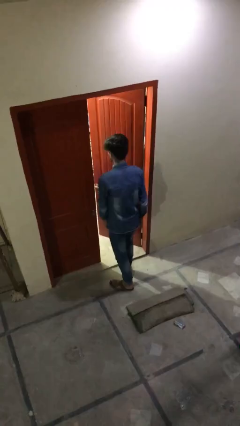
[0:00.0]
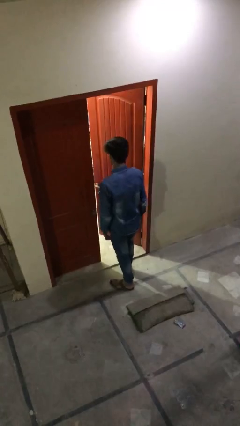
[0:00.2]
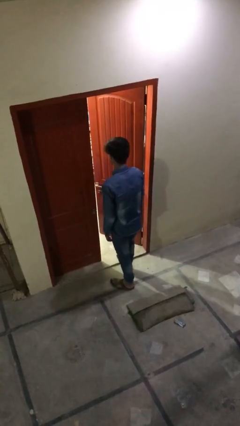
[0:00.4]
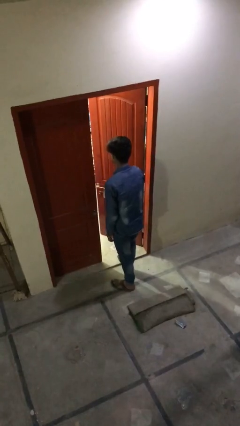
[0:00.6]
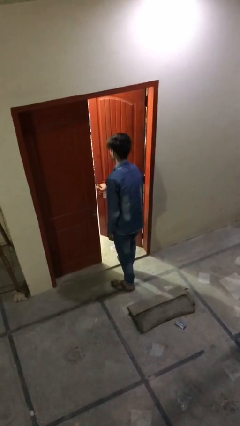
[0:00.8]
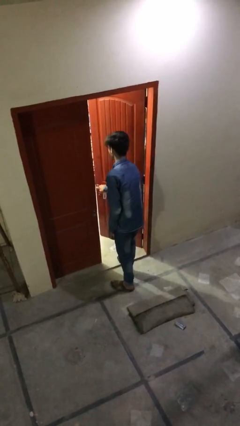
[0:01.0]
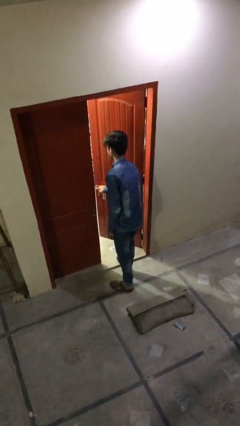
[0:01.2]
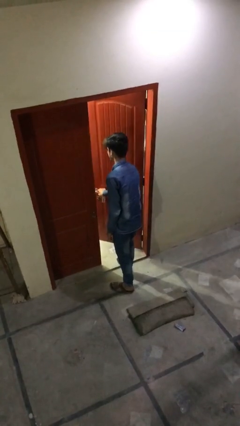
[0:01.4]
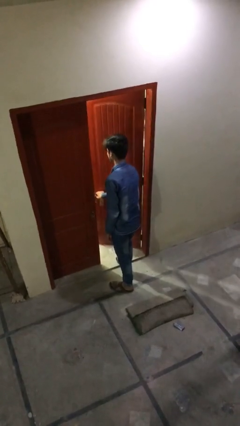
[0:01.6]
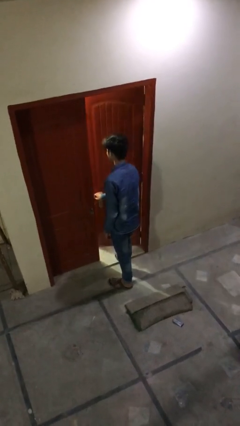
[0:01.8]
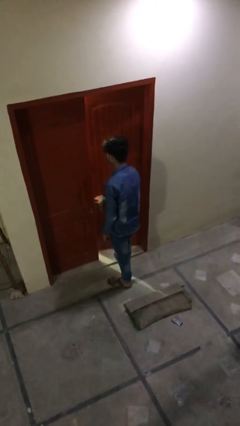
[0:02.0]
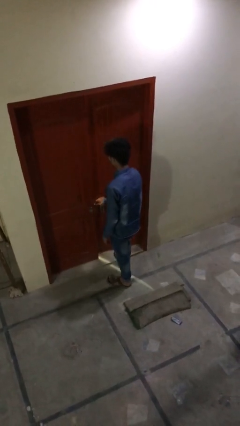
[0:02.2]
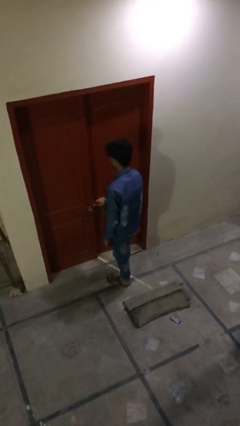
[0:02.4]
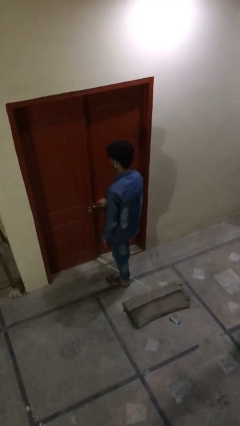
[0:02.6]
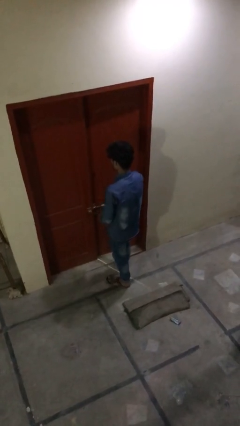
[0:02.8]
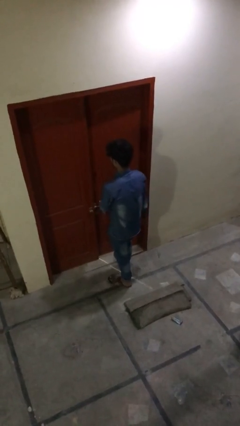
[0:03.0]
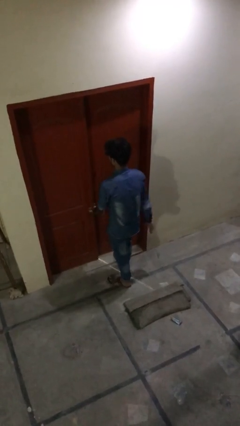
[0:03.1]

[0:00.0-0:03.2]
person closes facility door

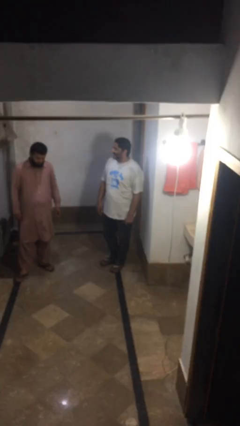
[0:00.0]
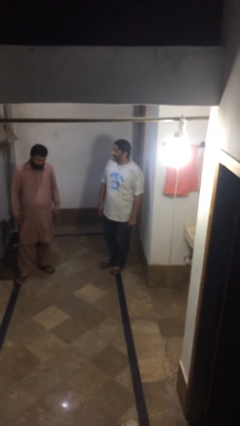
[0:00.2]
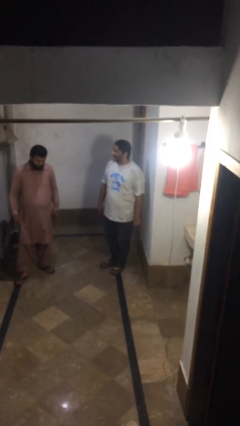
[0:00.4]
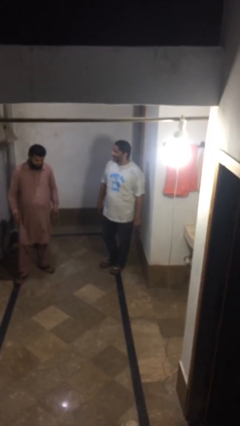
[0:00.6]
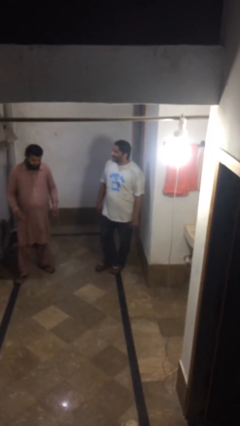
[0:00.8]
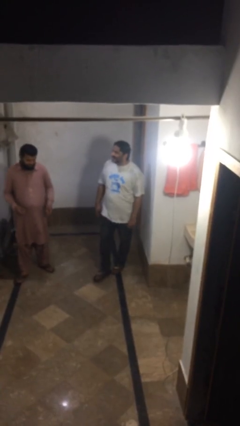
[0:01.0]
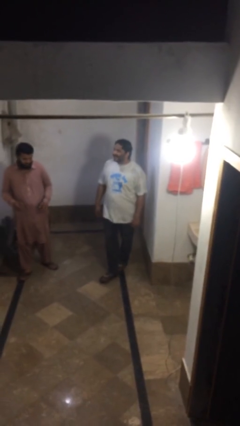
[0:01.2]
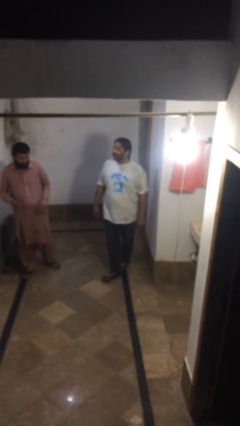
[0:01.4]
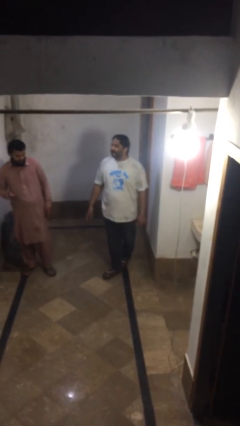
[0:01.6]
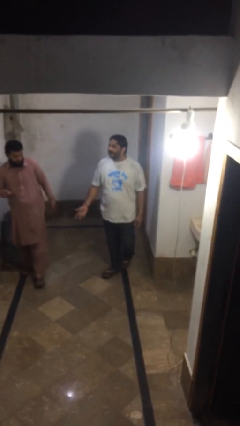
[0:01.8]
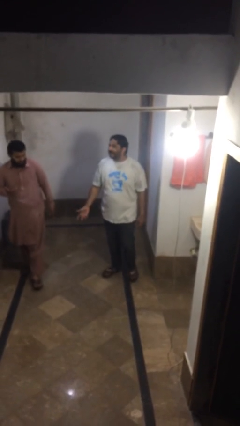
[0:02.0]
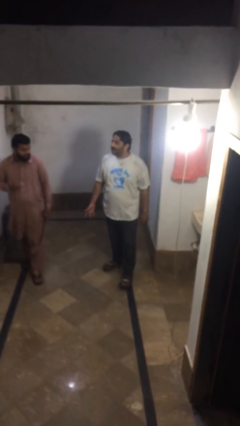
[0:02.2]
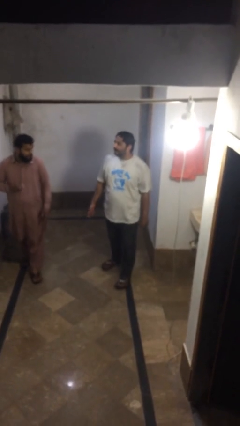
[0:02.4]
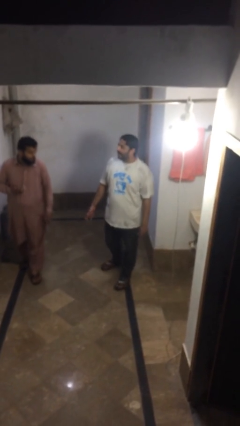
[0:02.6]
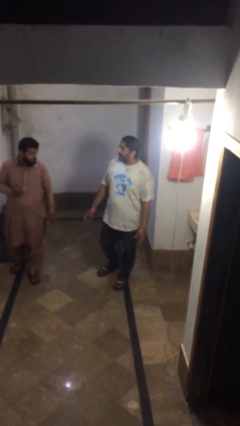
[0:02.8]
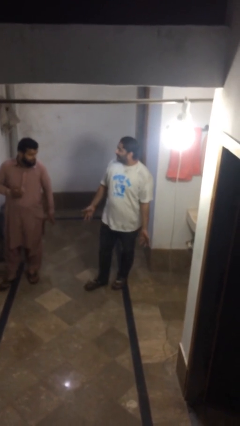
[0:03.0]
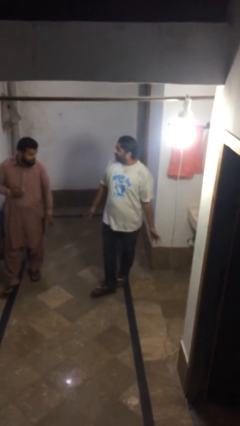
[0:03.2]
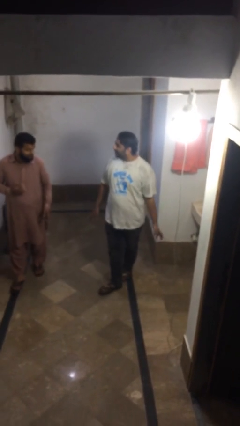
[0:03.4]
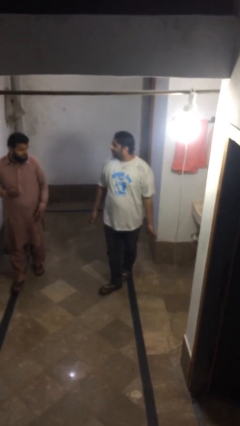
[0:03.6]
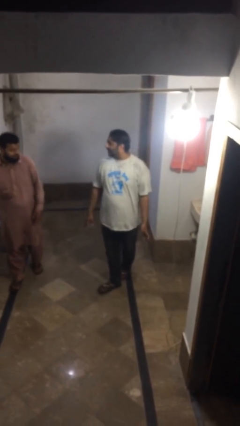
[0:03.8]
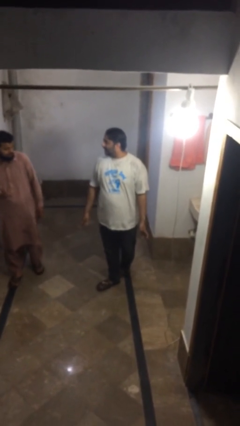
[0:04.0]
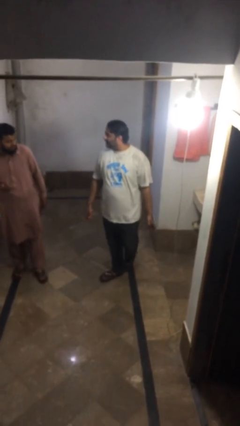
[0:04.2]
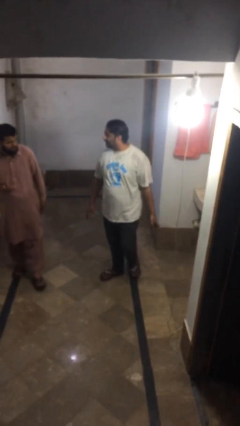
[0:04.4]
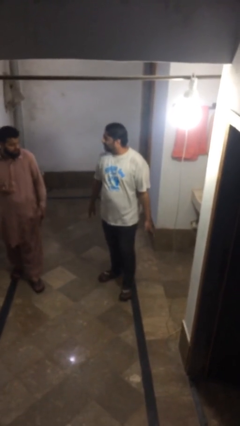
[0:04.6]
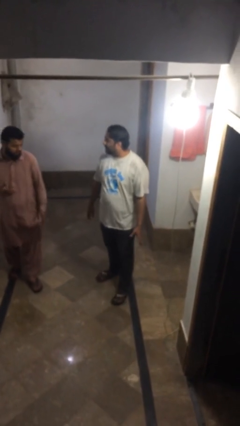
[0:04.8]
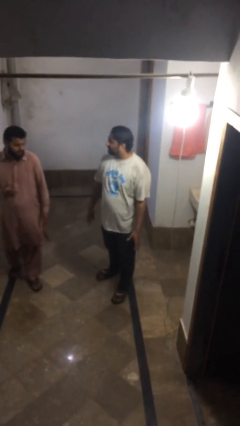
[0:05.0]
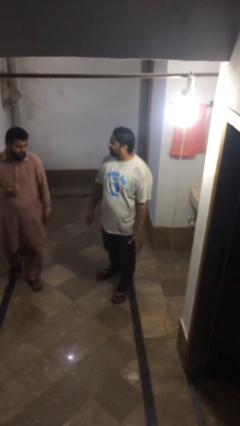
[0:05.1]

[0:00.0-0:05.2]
person talks to person

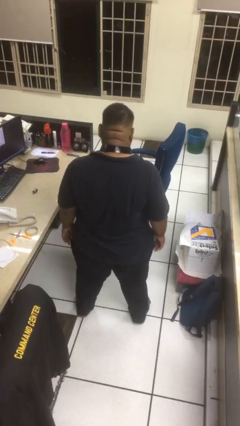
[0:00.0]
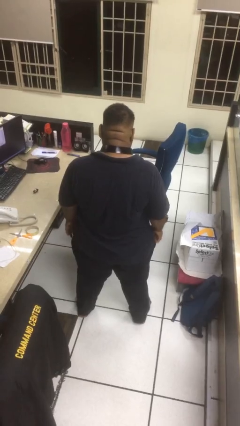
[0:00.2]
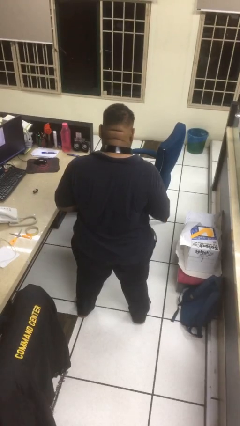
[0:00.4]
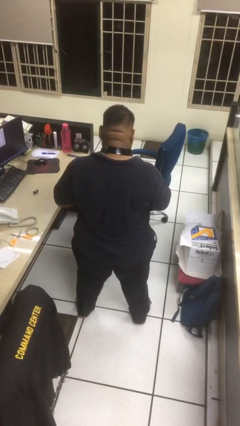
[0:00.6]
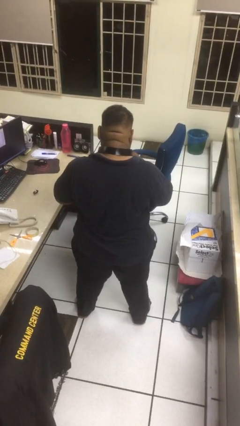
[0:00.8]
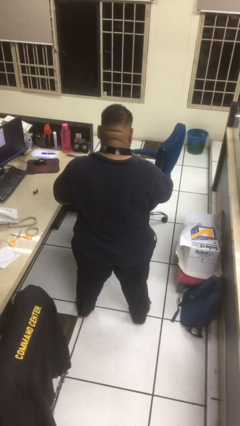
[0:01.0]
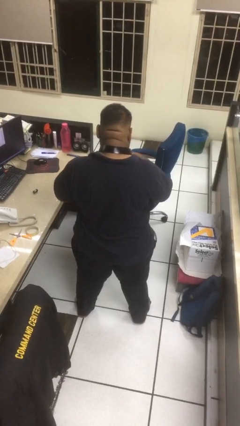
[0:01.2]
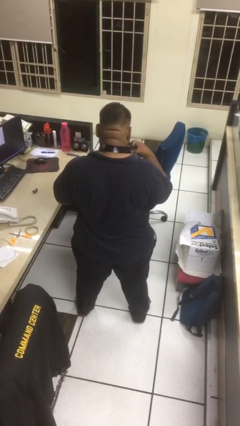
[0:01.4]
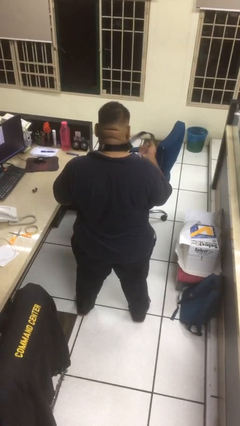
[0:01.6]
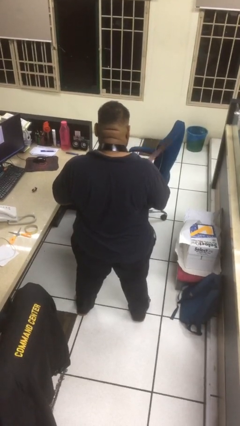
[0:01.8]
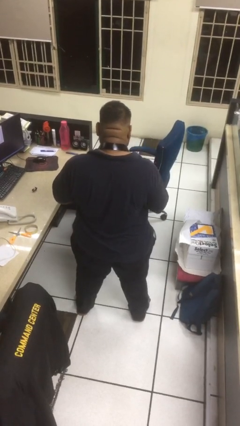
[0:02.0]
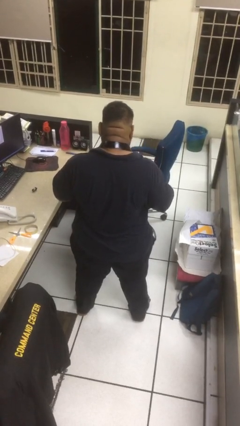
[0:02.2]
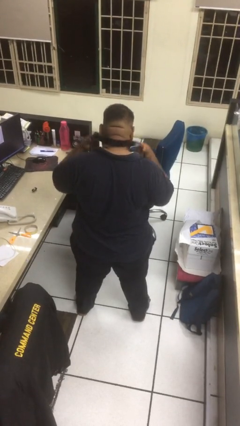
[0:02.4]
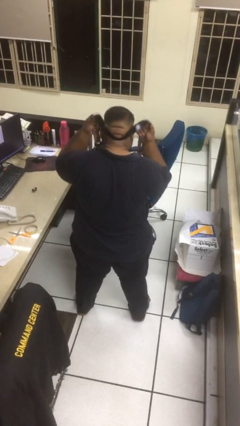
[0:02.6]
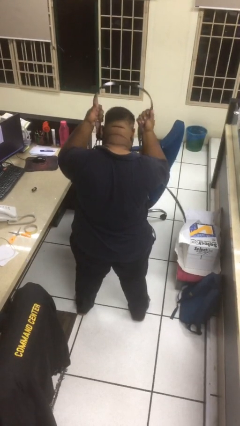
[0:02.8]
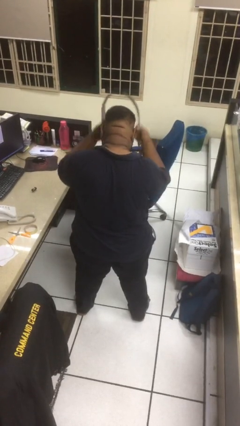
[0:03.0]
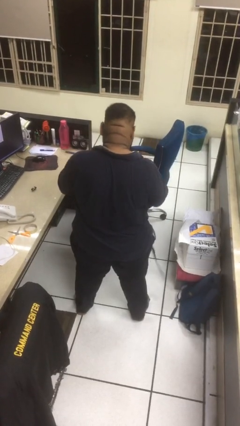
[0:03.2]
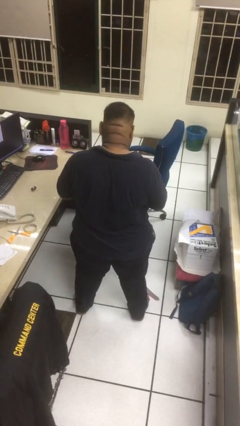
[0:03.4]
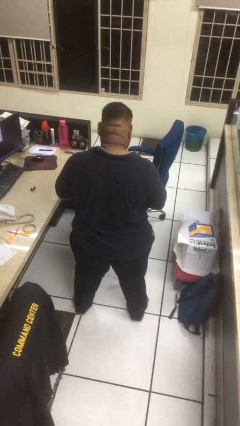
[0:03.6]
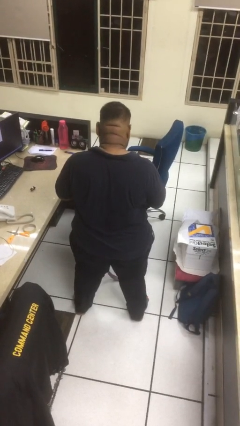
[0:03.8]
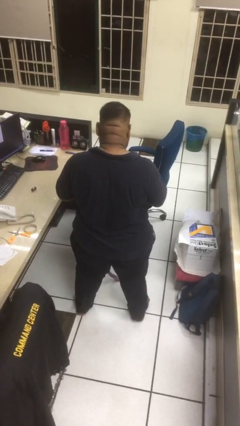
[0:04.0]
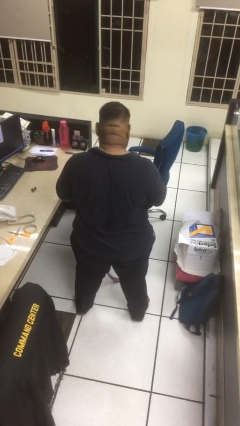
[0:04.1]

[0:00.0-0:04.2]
person takes off necktie

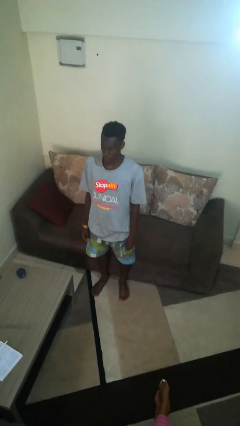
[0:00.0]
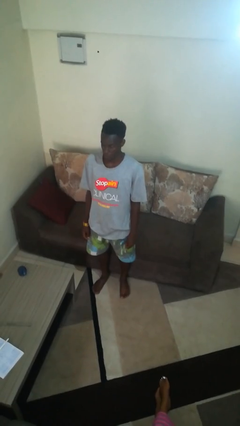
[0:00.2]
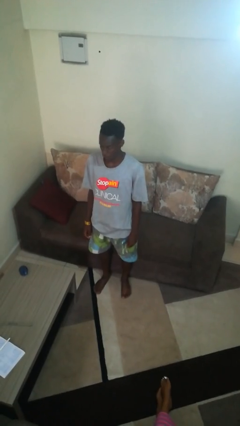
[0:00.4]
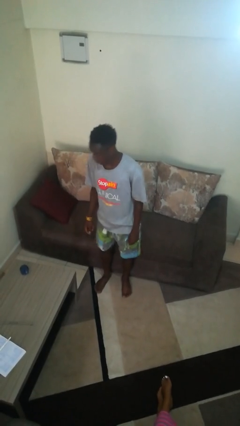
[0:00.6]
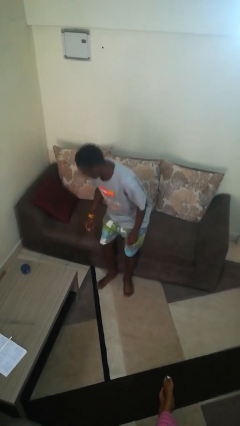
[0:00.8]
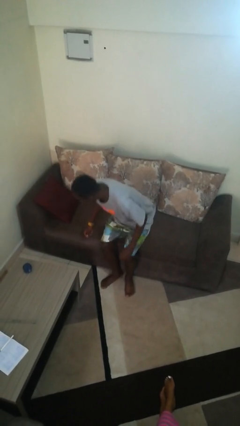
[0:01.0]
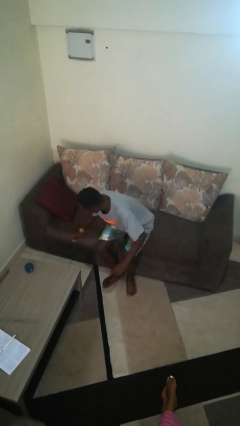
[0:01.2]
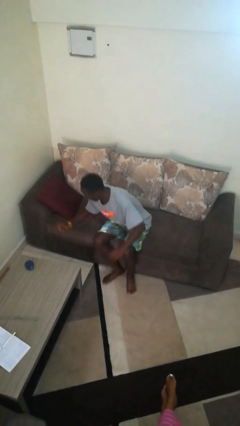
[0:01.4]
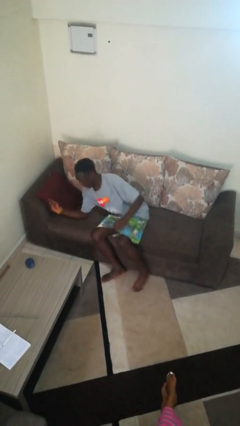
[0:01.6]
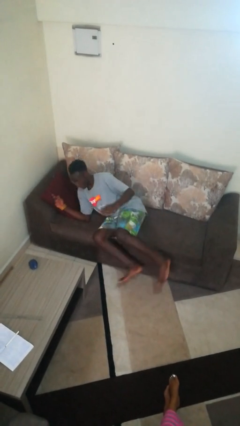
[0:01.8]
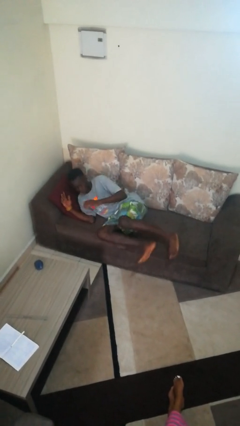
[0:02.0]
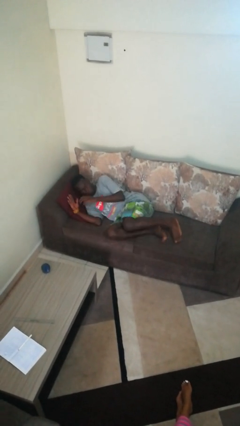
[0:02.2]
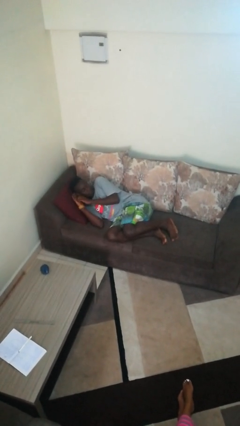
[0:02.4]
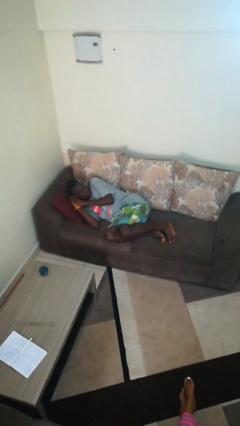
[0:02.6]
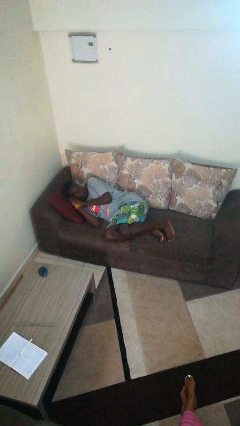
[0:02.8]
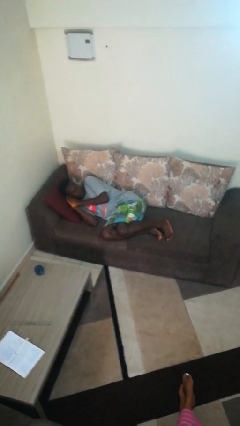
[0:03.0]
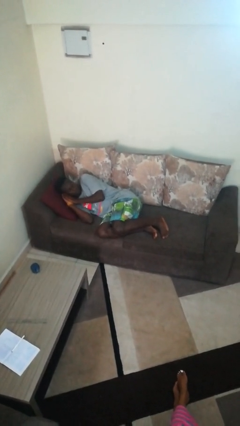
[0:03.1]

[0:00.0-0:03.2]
person lies down on couch

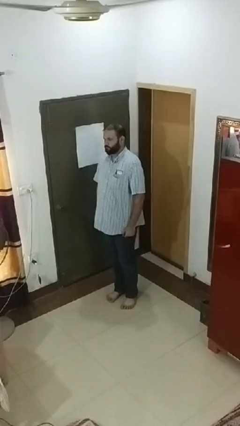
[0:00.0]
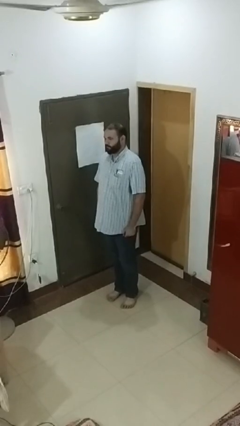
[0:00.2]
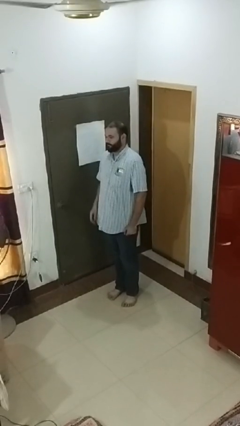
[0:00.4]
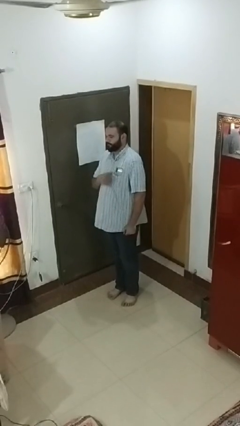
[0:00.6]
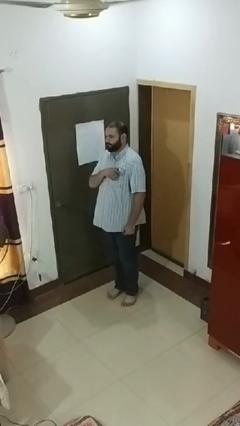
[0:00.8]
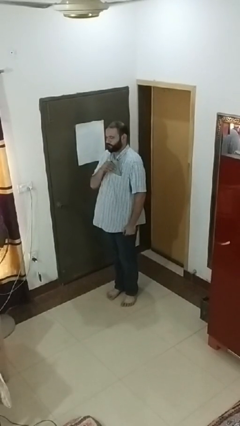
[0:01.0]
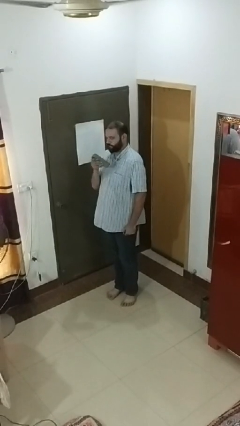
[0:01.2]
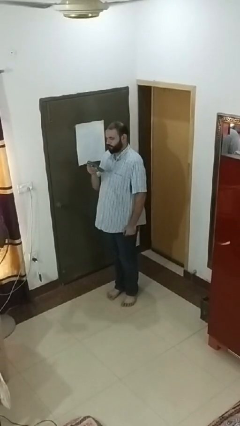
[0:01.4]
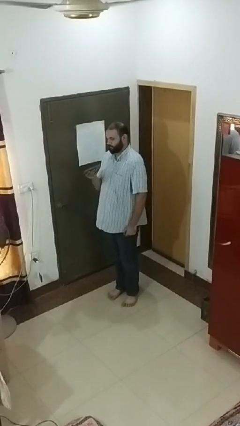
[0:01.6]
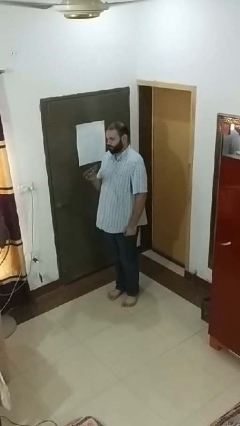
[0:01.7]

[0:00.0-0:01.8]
person takes phone from pocket
